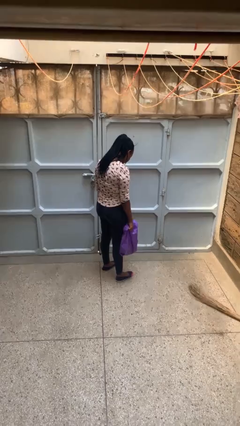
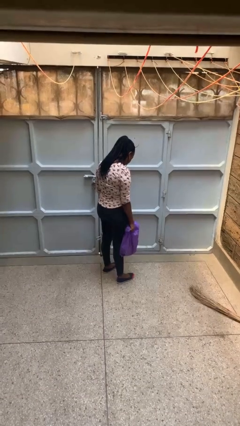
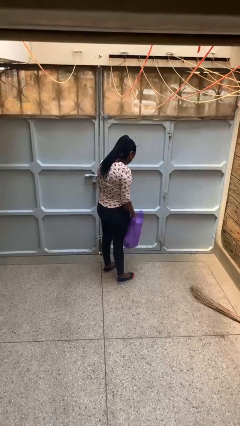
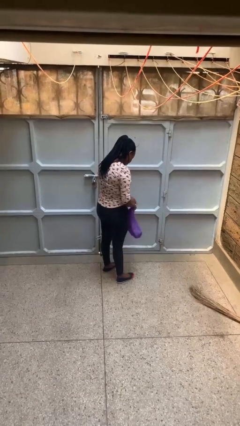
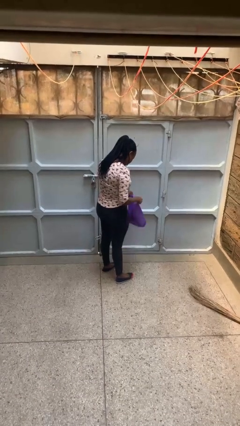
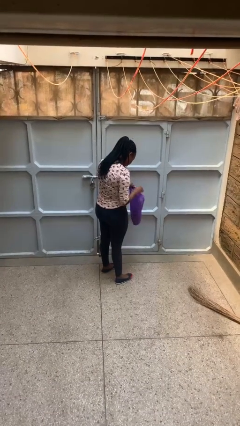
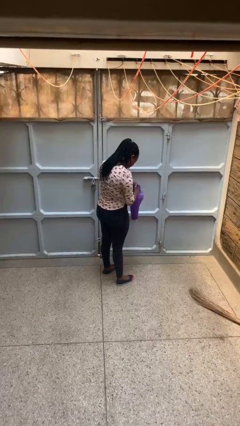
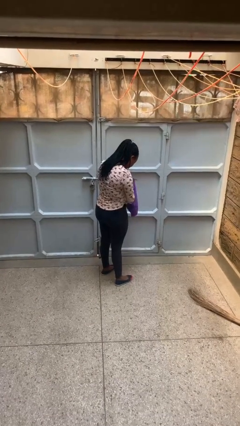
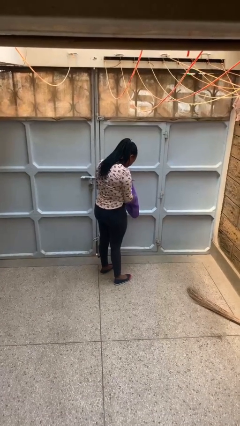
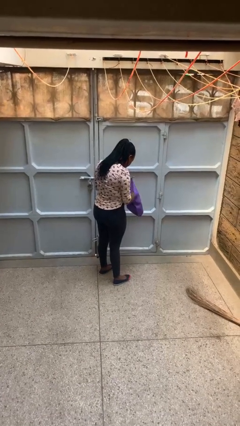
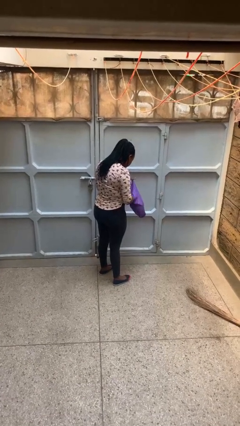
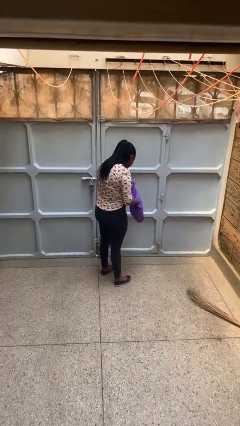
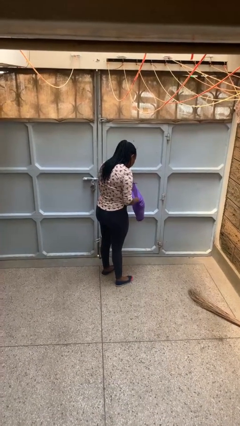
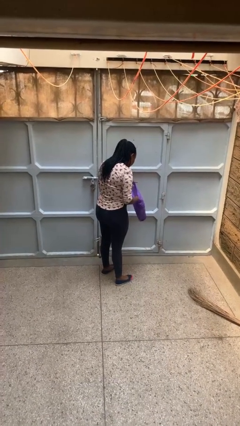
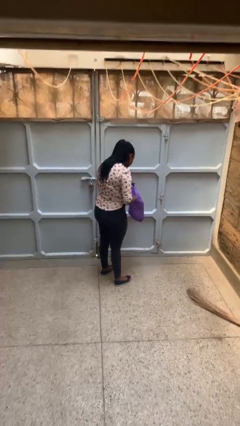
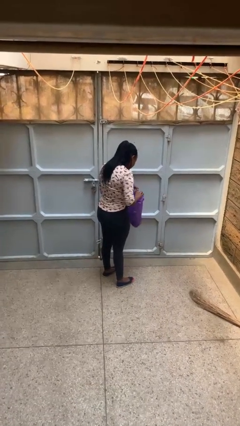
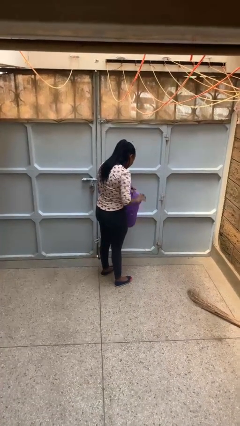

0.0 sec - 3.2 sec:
person searches in bag

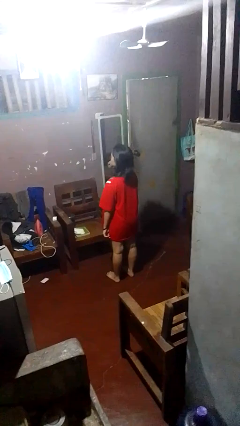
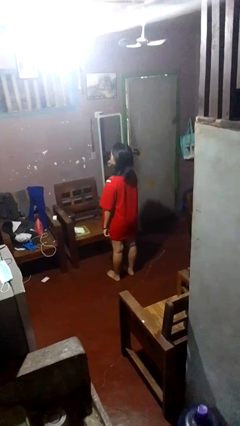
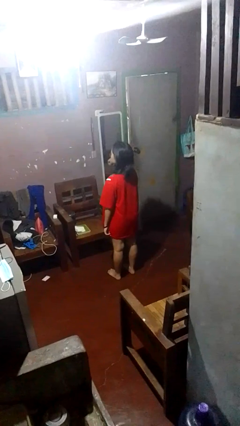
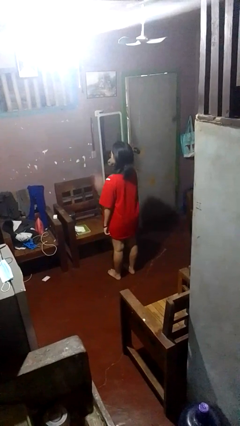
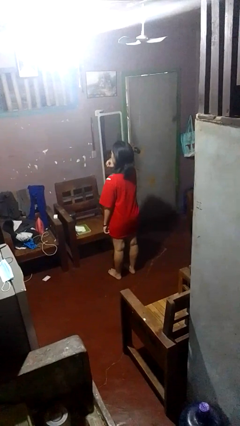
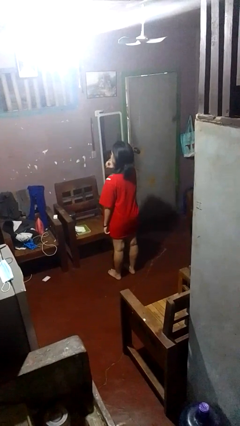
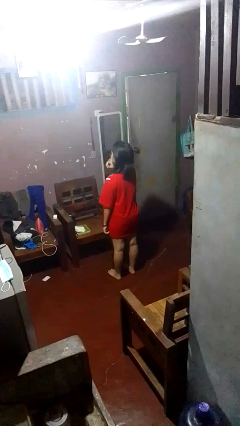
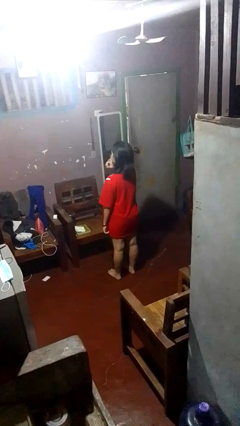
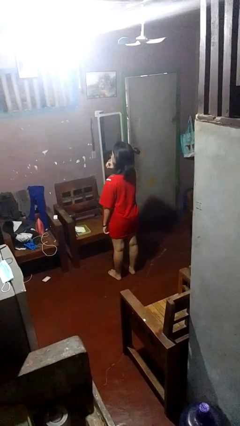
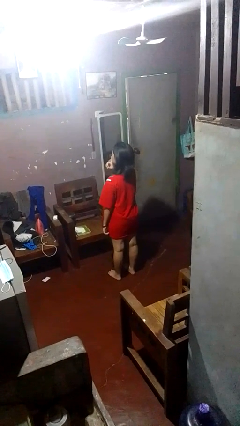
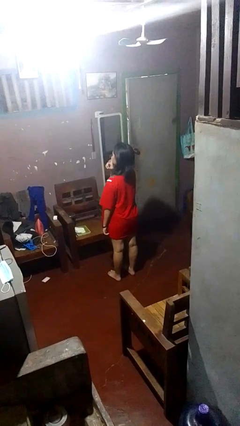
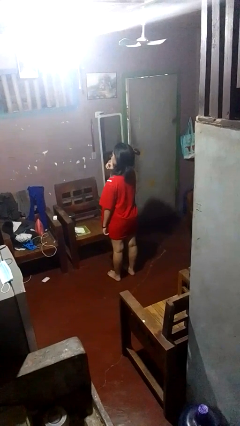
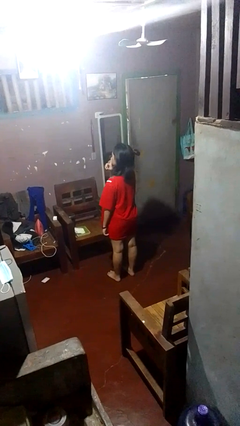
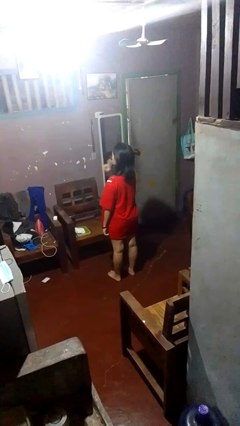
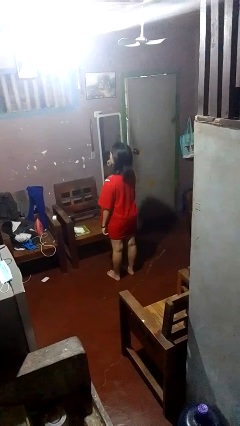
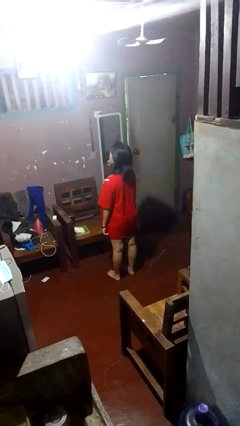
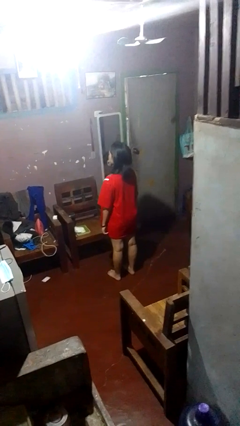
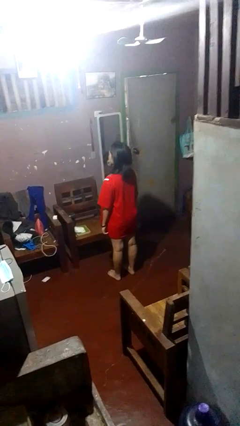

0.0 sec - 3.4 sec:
person gestures be quiet

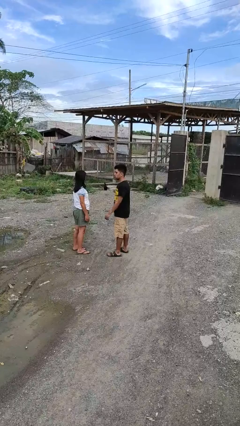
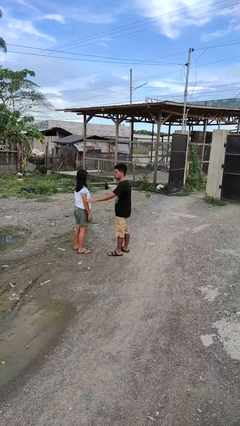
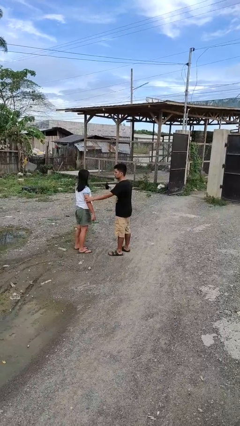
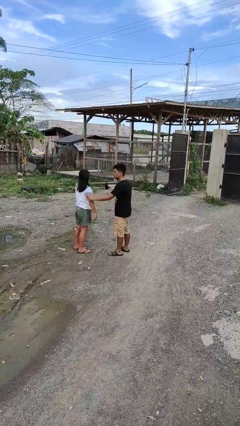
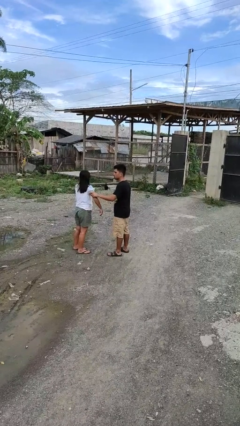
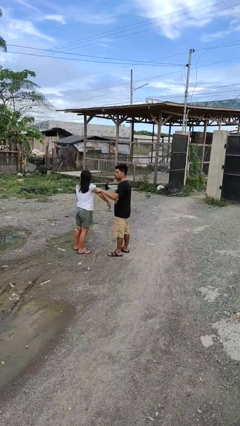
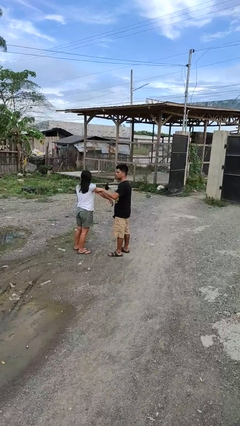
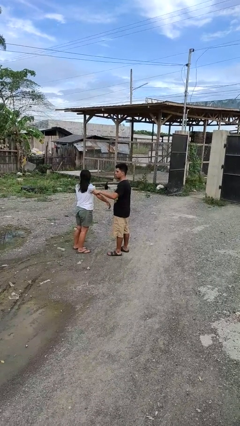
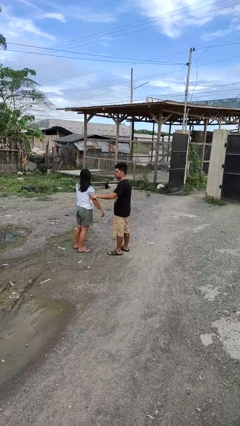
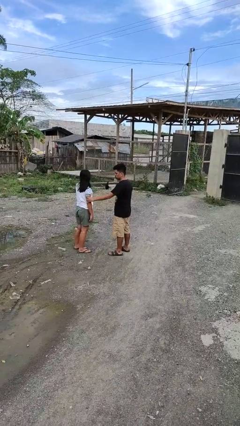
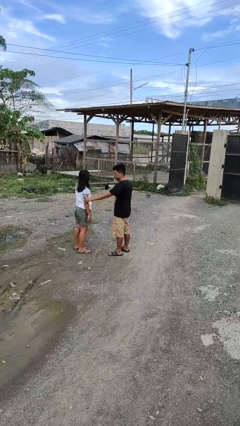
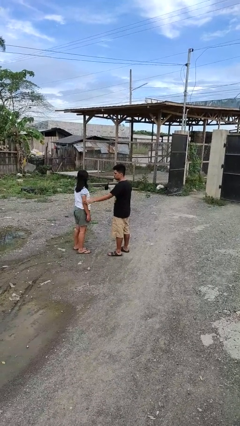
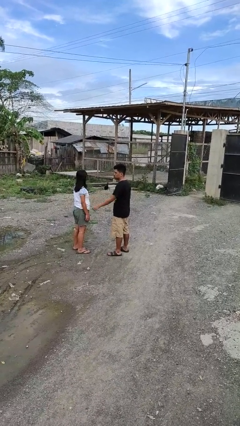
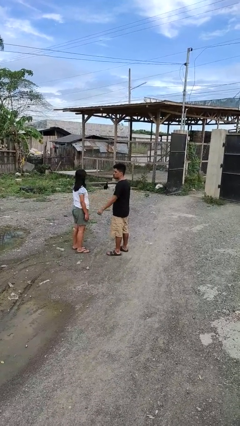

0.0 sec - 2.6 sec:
person grabs person by bicep

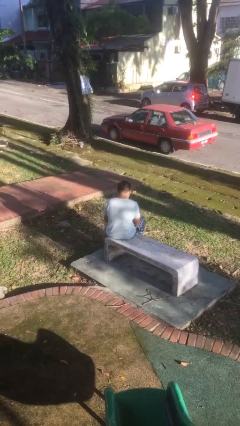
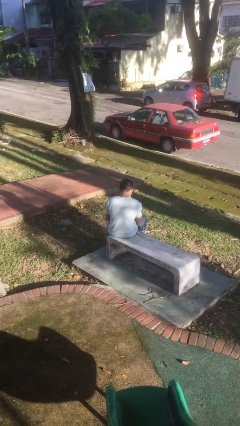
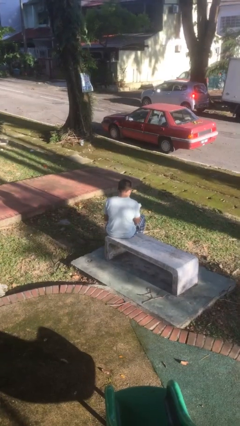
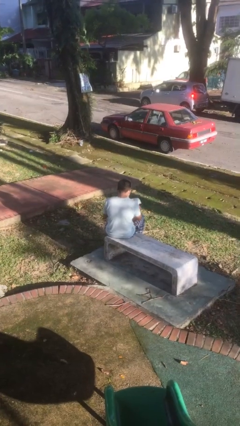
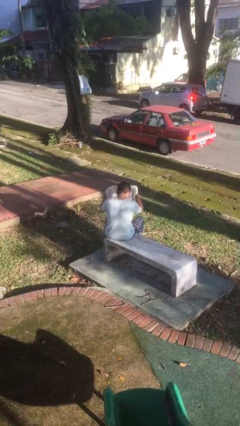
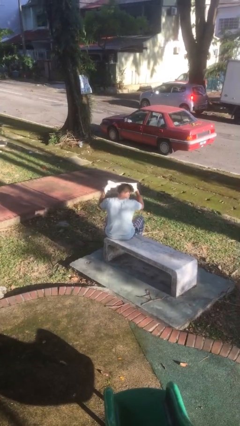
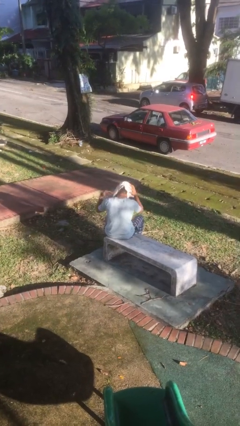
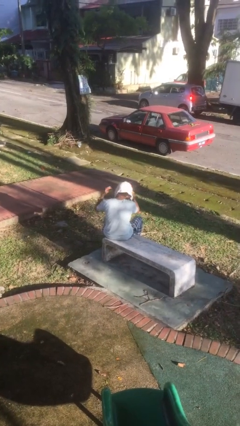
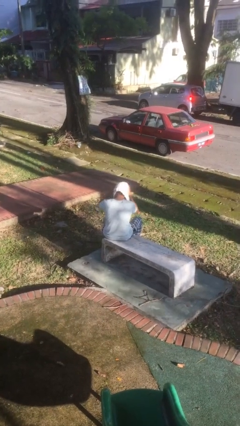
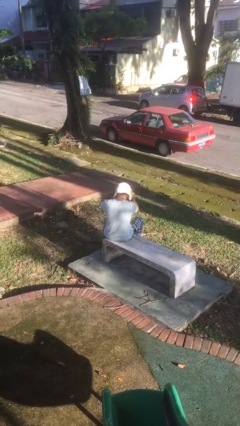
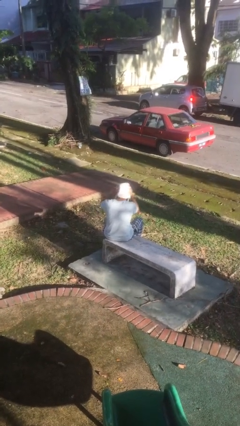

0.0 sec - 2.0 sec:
person dries hair with towel

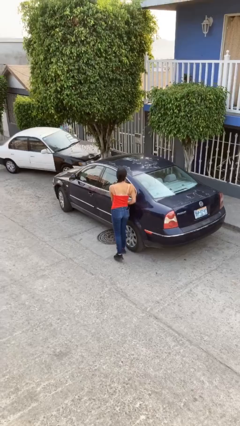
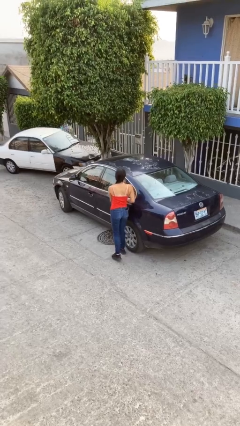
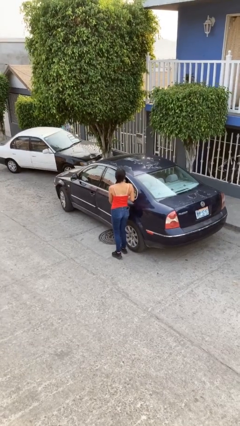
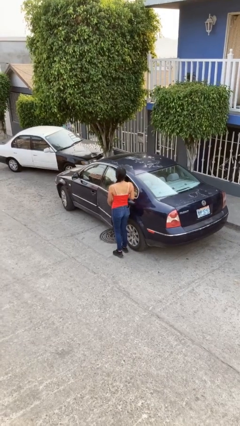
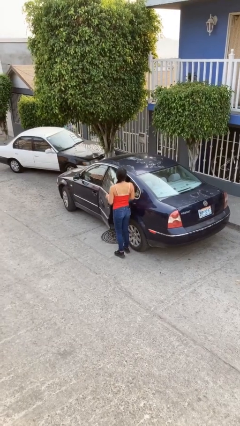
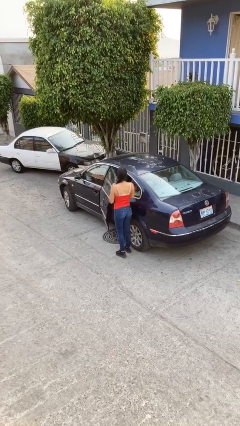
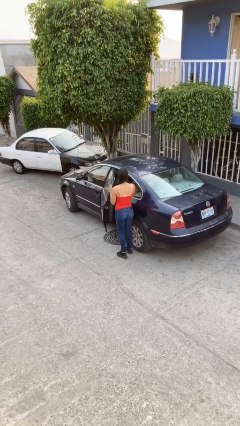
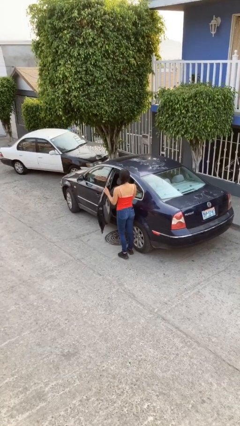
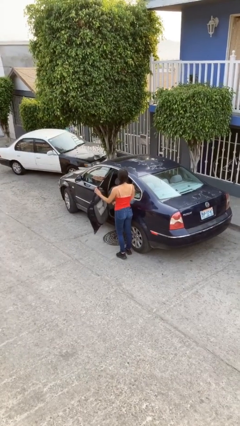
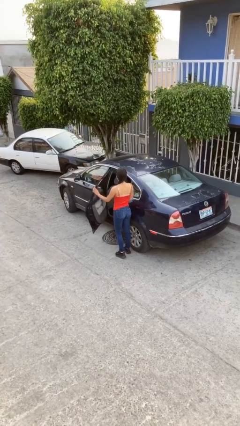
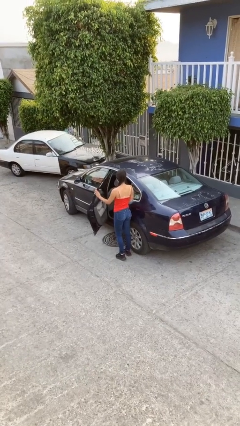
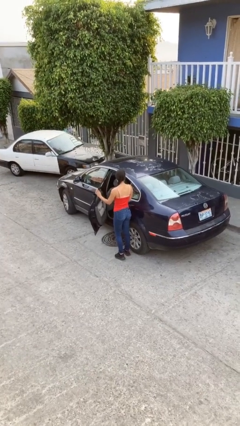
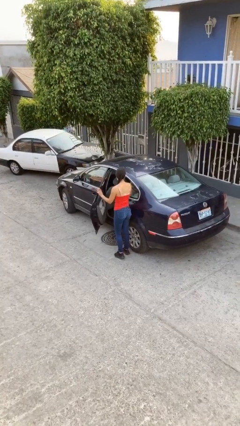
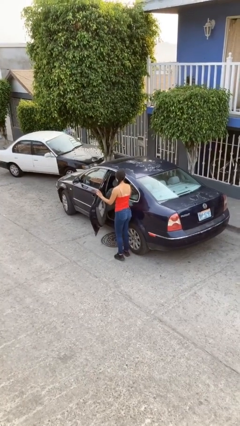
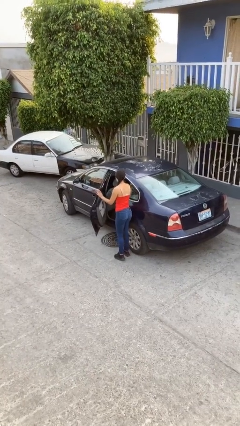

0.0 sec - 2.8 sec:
person opens car door

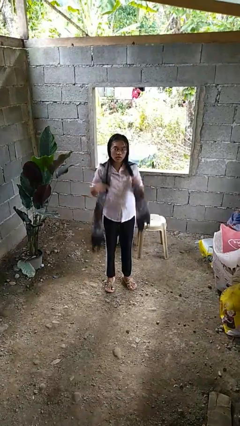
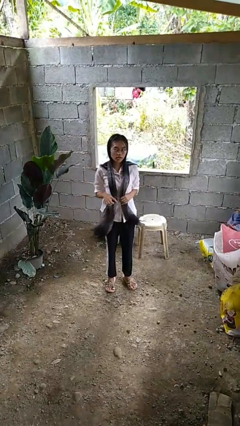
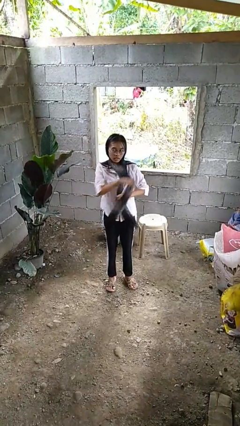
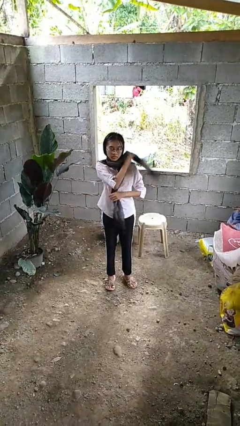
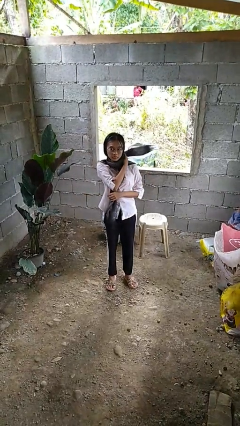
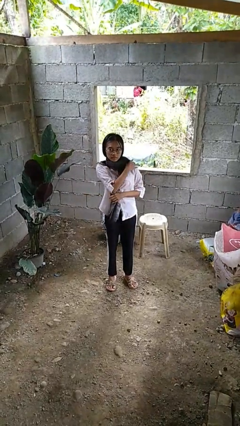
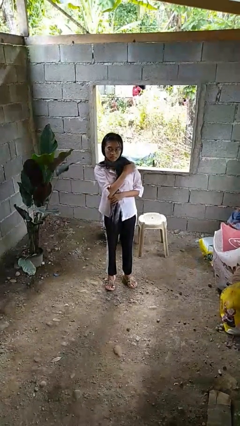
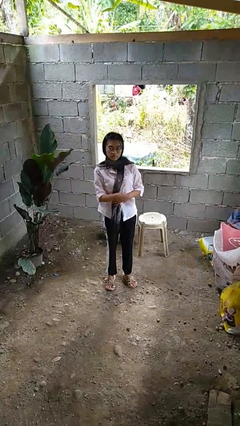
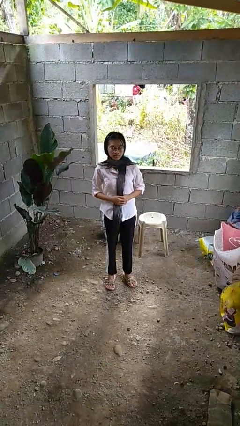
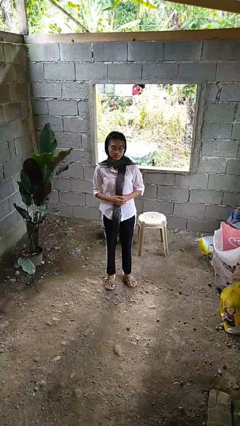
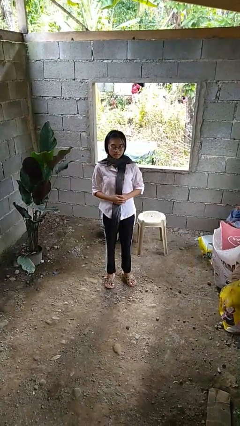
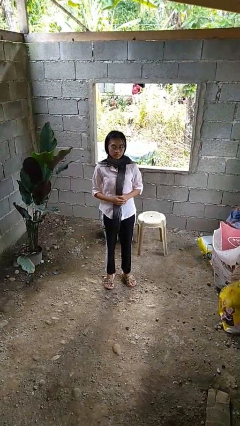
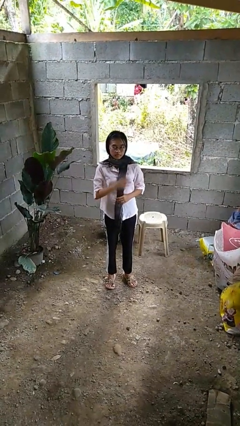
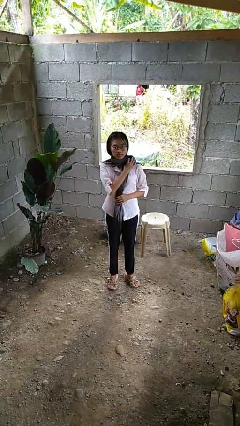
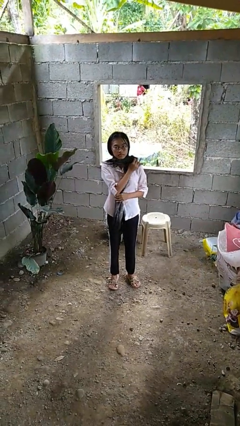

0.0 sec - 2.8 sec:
person puts on scarf

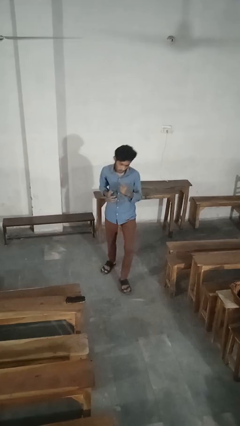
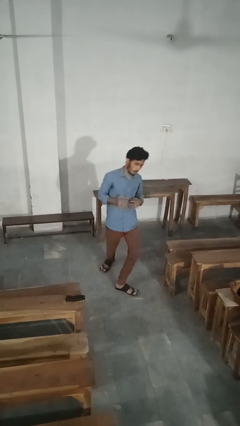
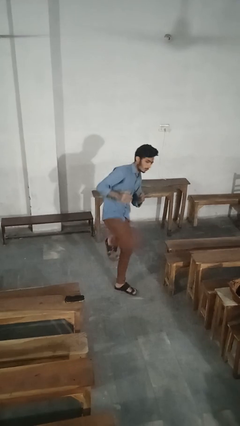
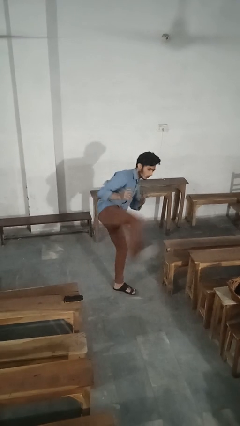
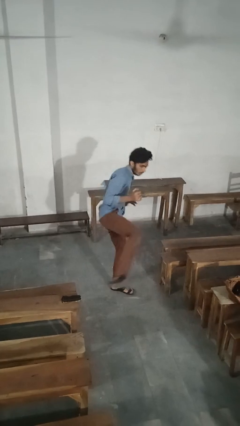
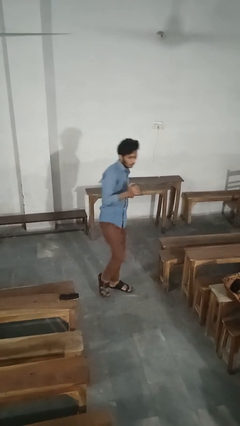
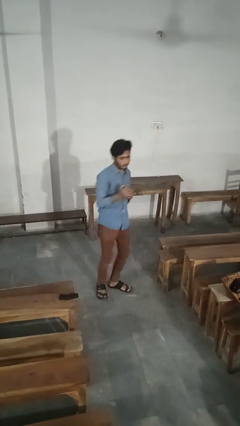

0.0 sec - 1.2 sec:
person karate kicks
